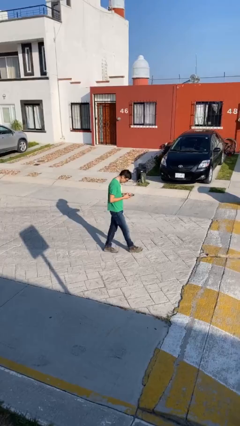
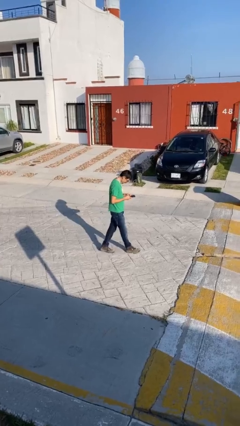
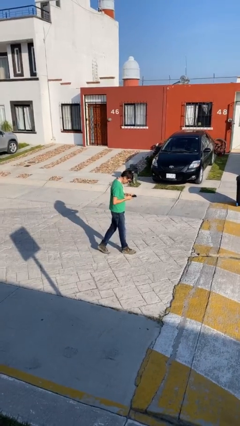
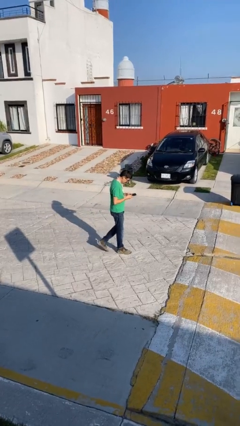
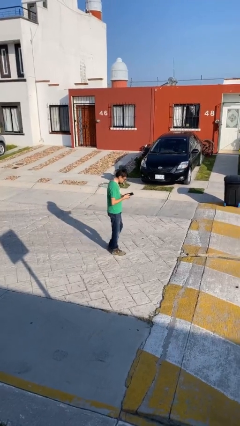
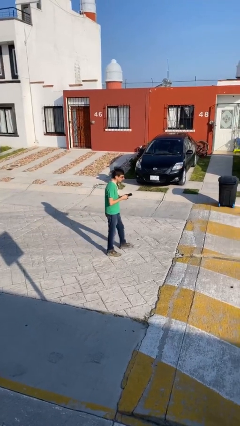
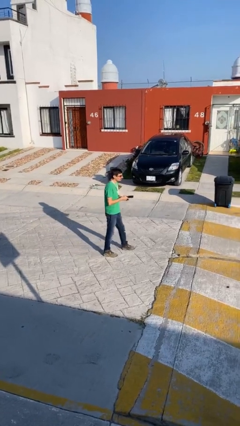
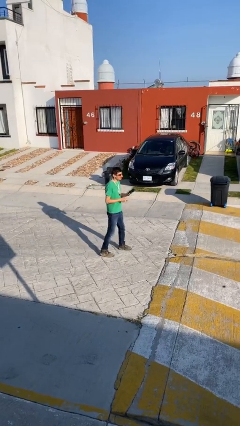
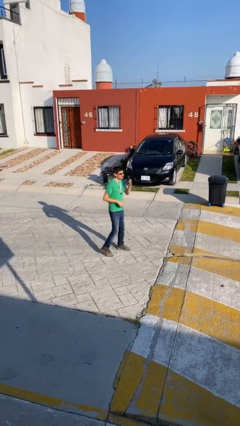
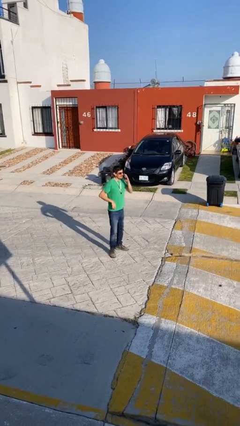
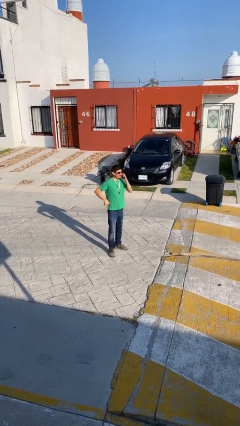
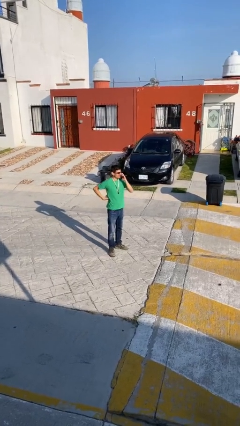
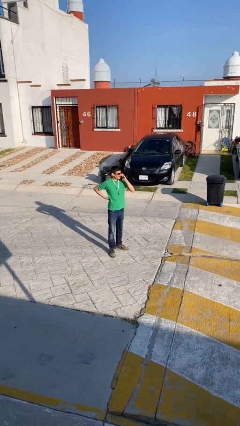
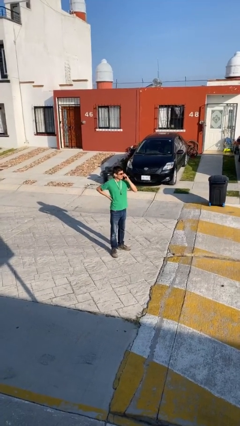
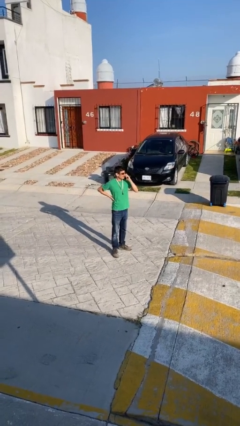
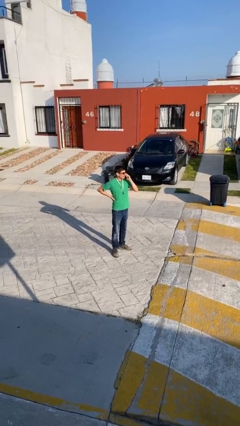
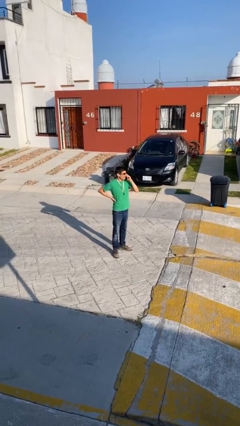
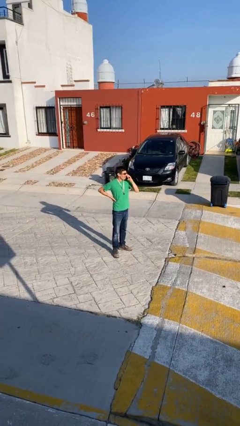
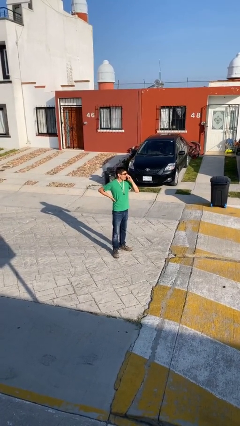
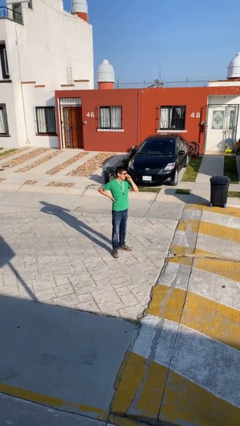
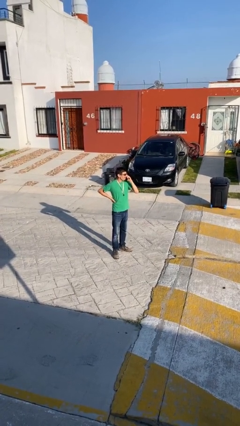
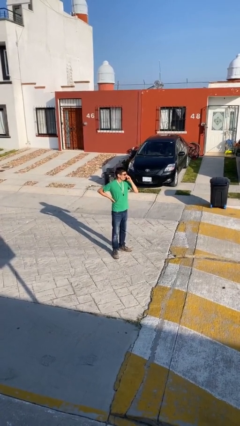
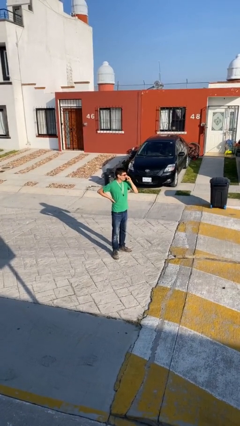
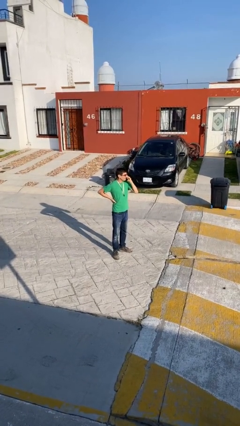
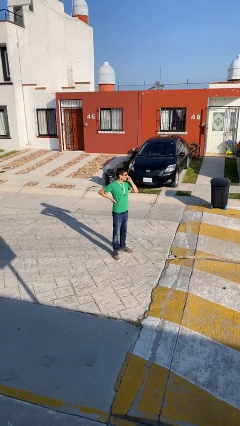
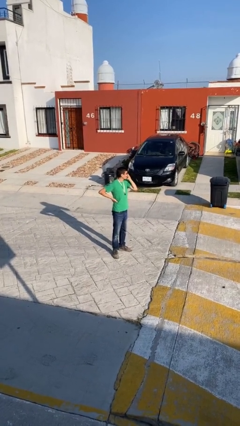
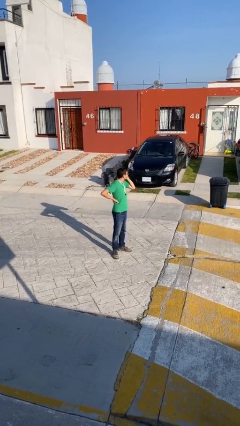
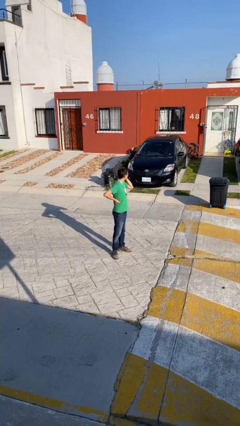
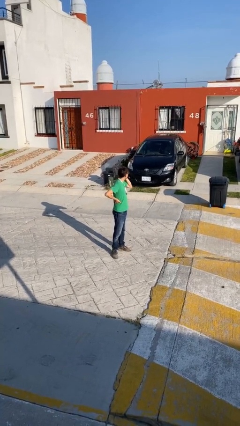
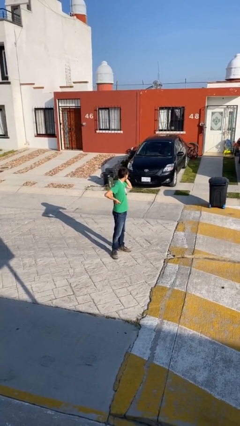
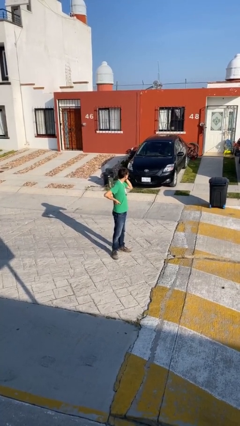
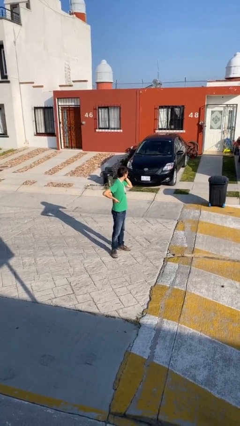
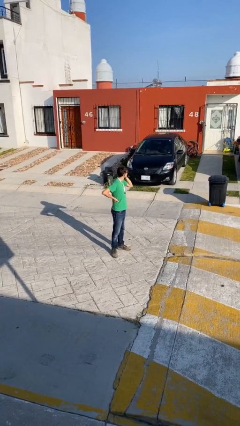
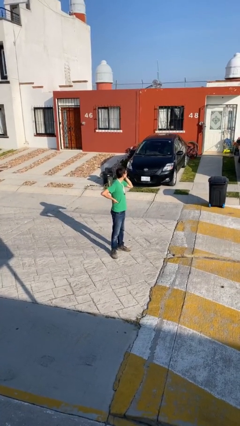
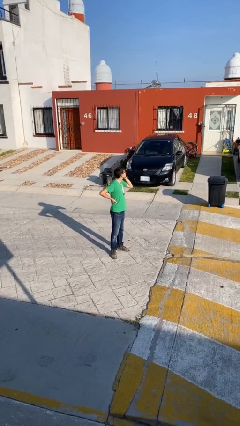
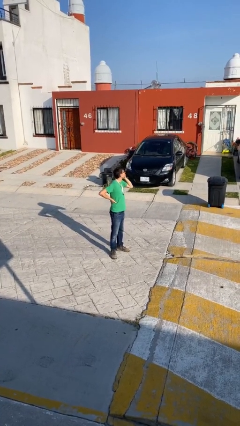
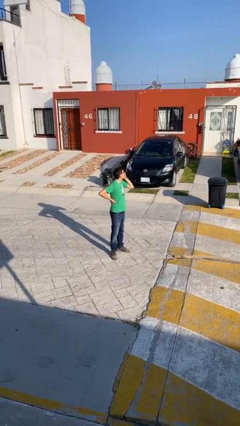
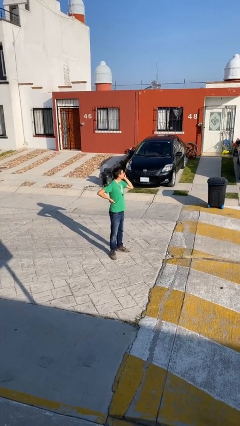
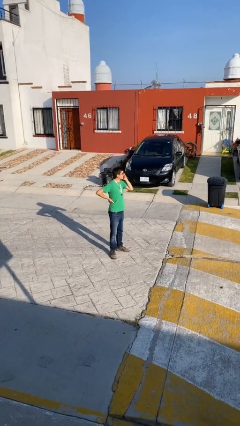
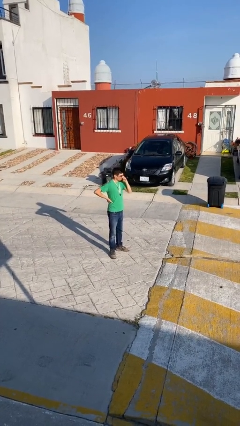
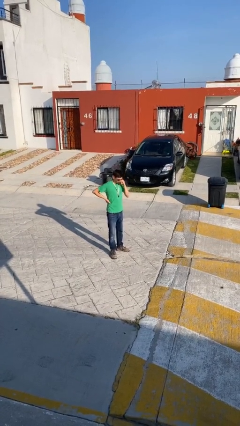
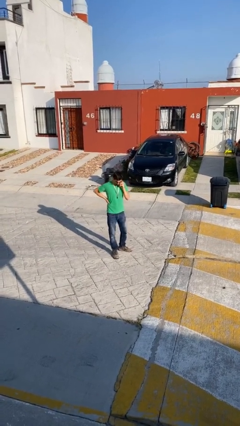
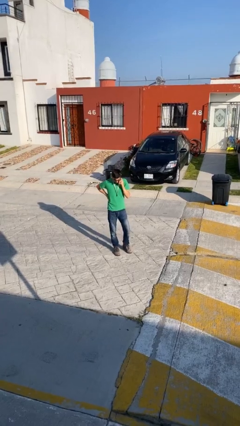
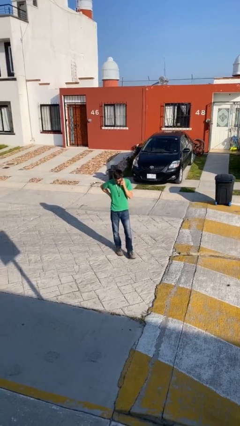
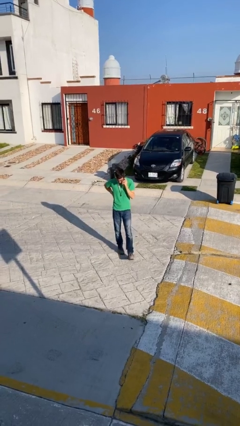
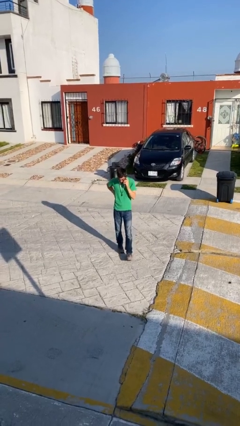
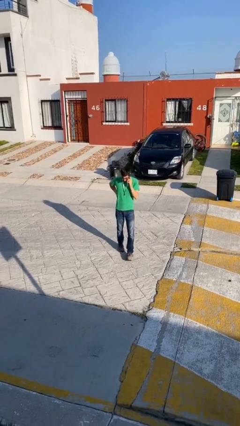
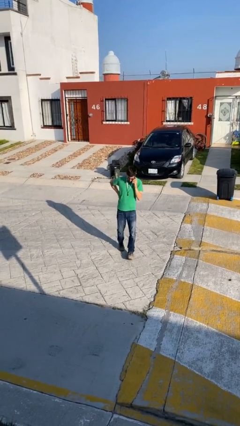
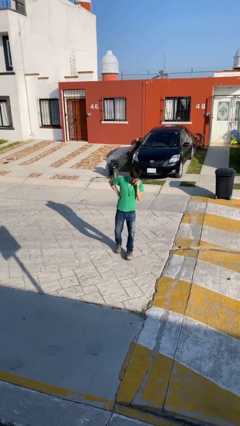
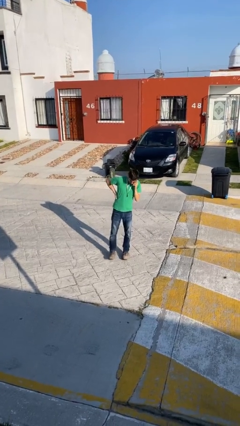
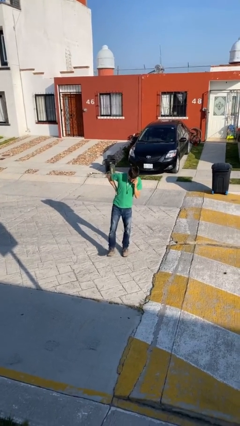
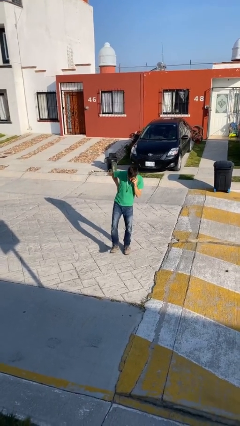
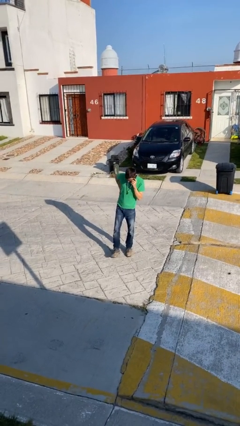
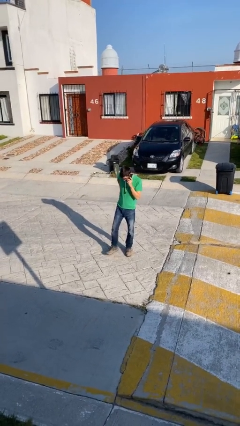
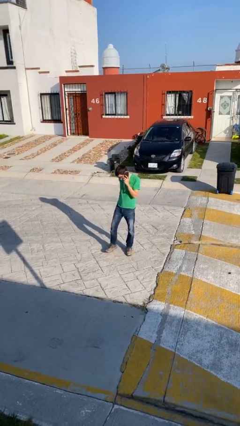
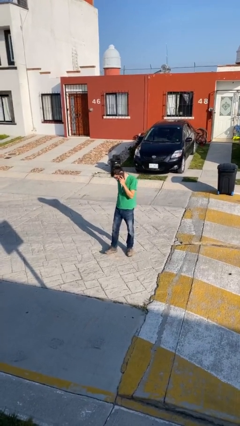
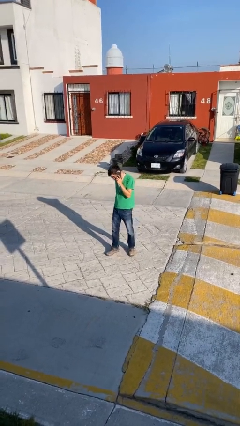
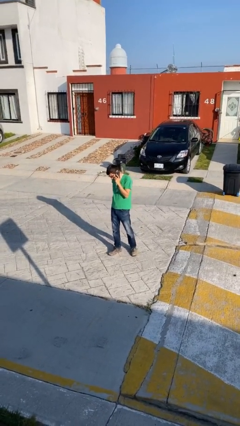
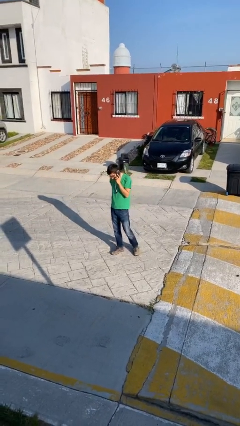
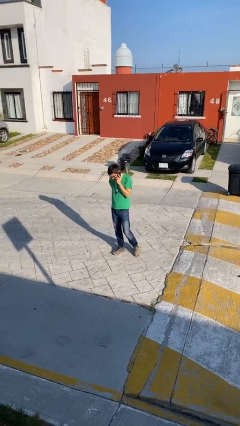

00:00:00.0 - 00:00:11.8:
person talks on phone

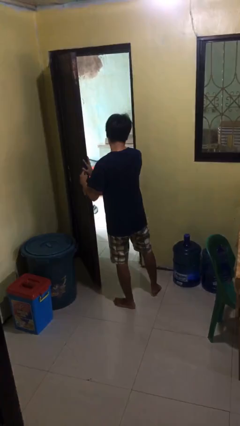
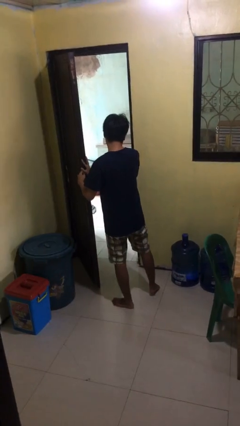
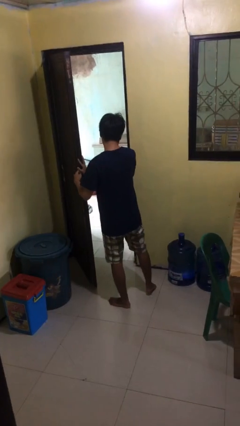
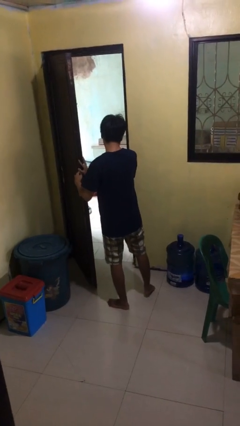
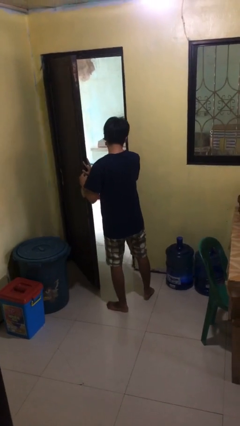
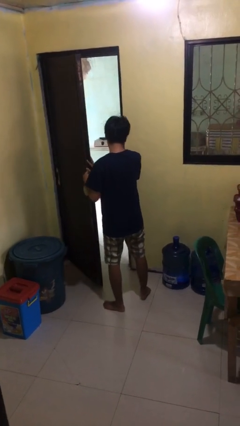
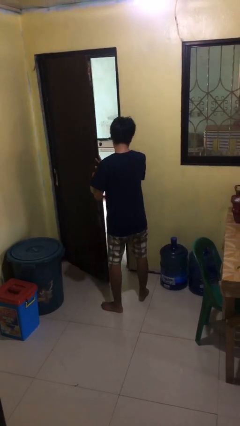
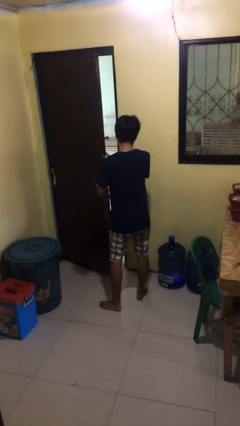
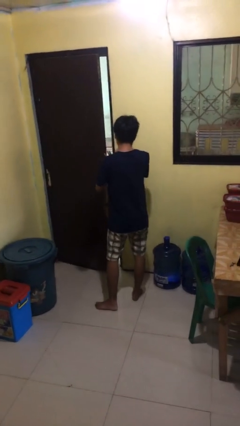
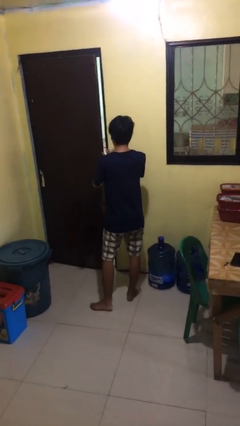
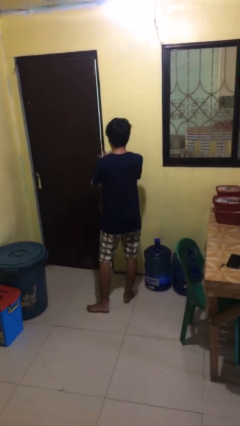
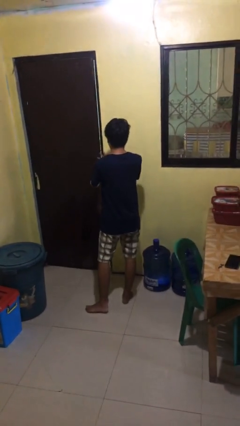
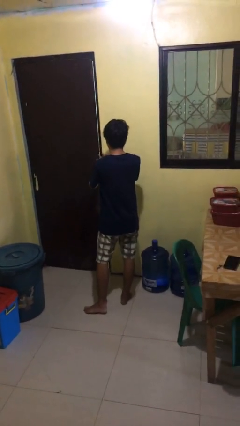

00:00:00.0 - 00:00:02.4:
person closes facility door

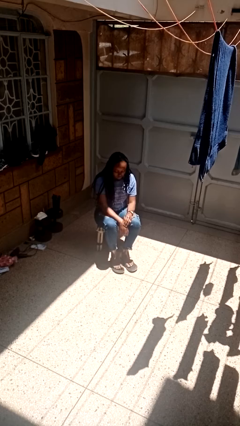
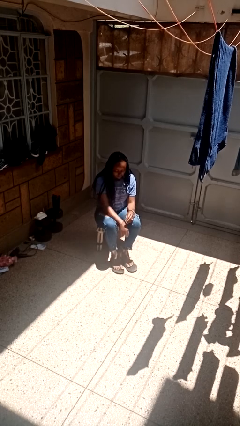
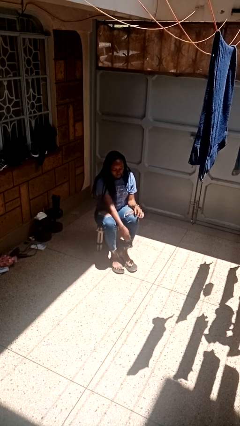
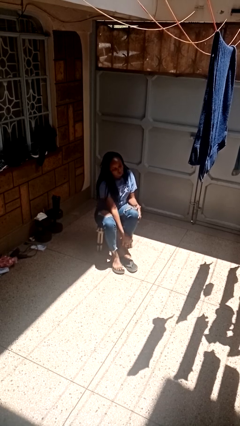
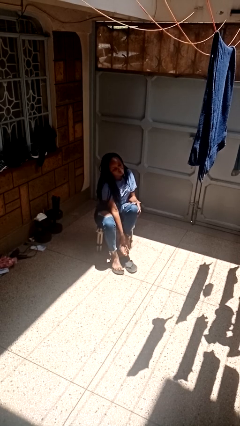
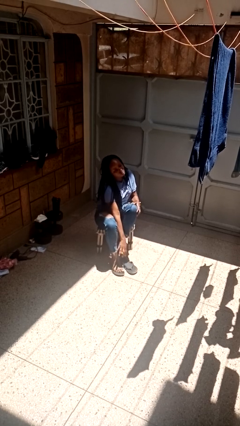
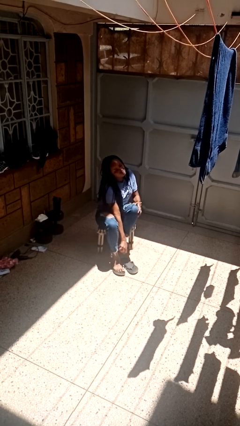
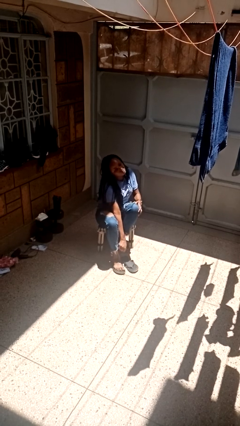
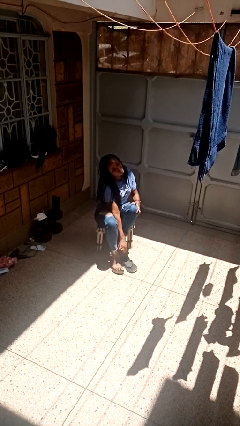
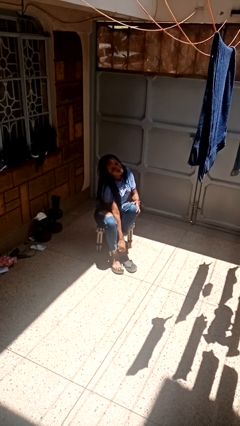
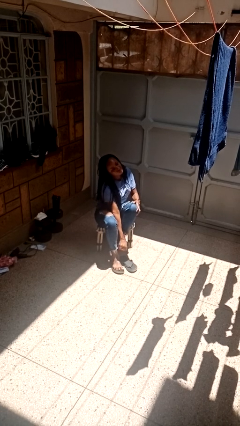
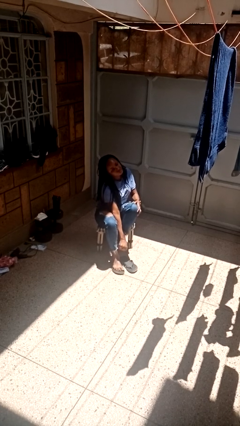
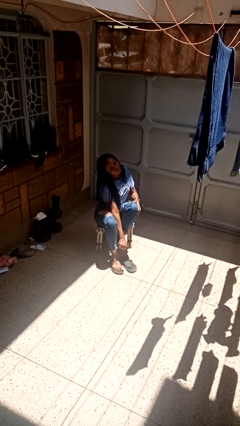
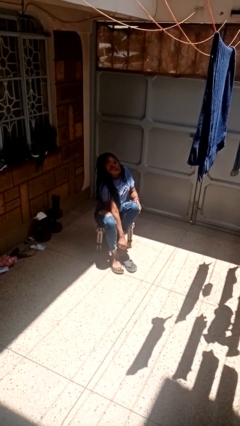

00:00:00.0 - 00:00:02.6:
person rubs foot

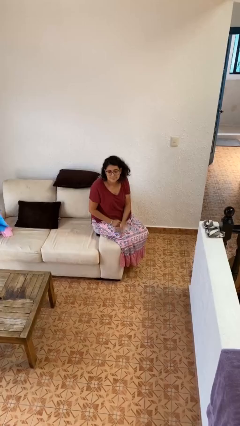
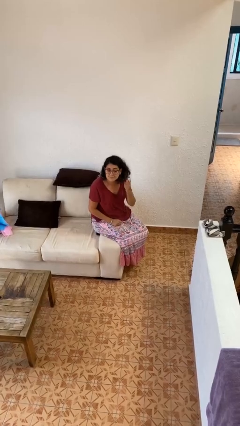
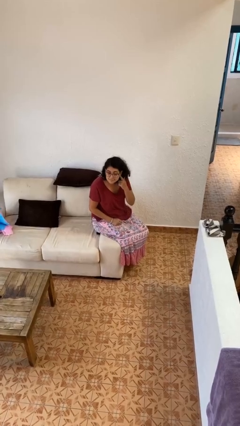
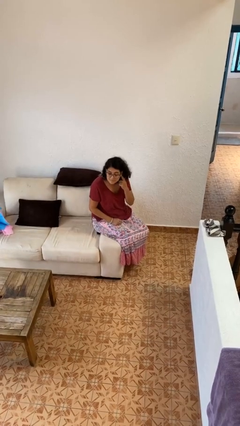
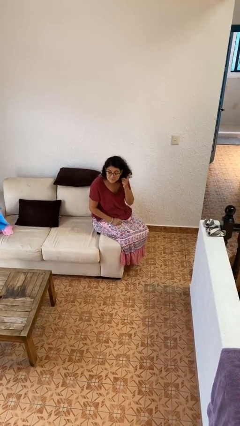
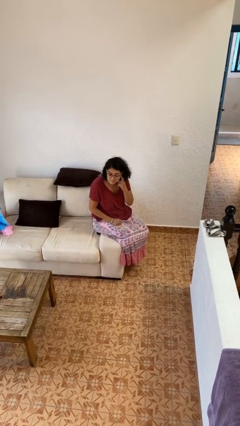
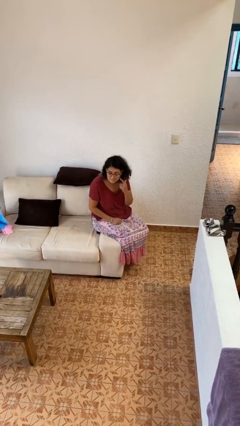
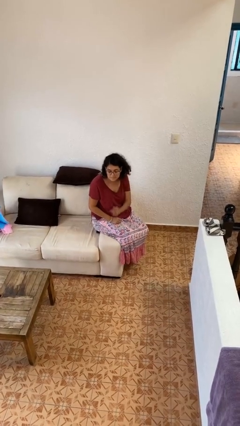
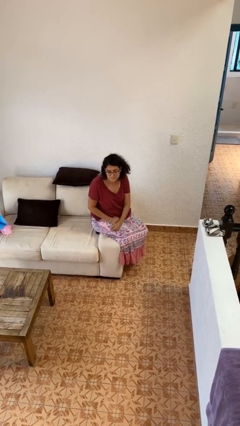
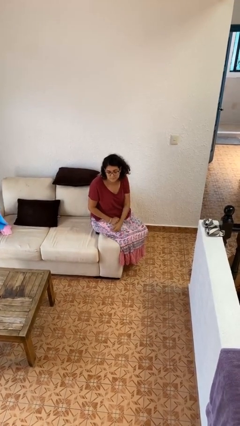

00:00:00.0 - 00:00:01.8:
person gestures listen closely
